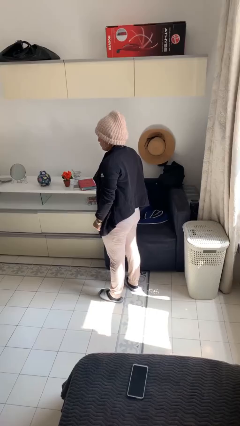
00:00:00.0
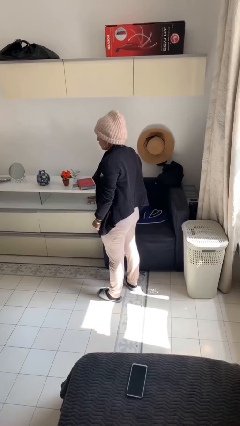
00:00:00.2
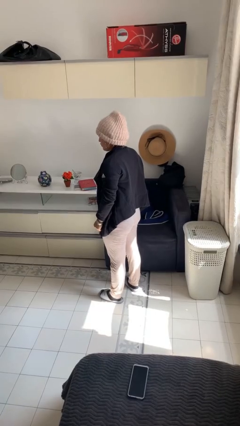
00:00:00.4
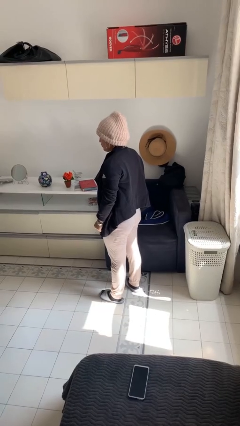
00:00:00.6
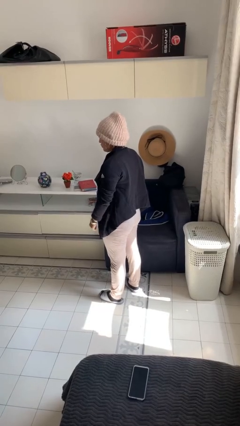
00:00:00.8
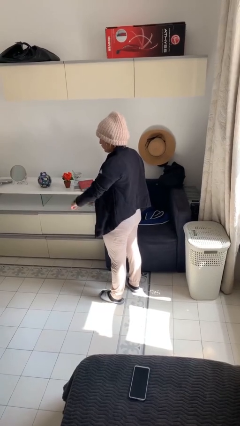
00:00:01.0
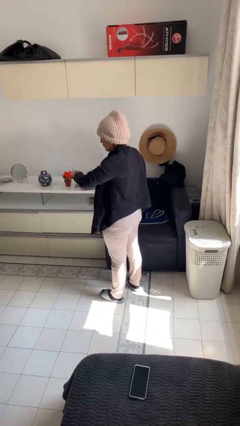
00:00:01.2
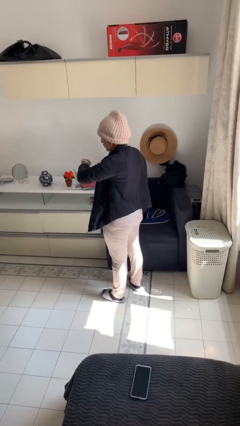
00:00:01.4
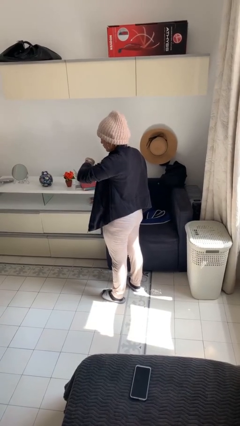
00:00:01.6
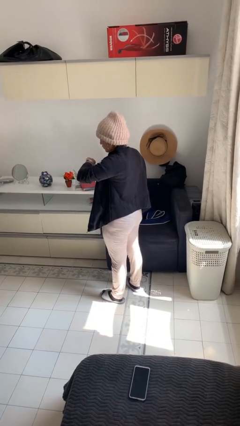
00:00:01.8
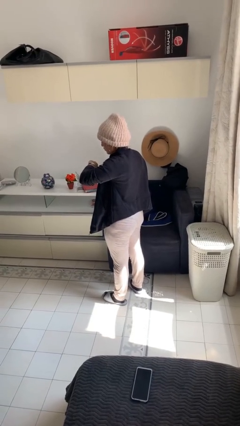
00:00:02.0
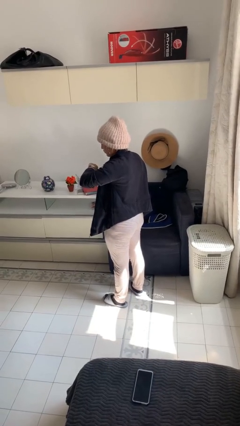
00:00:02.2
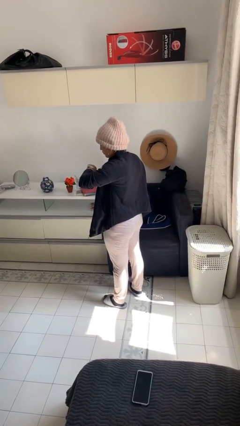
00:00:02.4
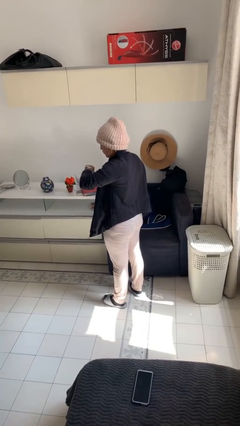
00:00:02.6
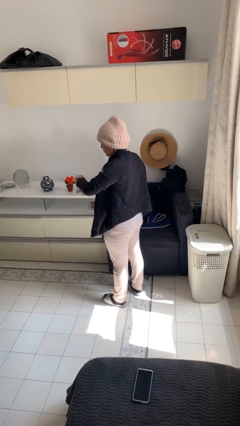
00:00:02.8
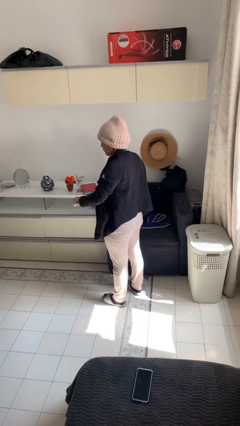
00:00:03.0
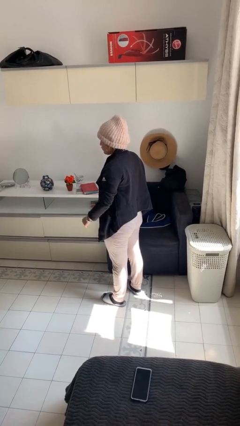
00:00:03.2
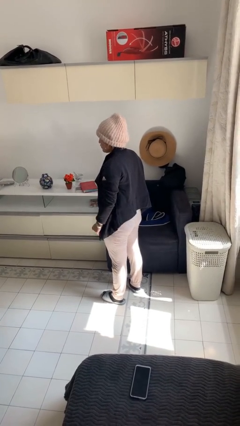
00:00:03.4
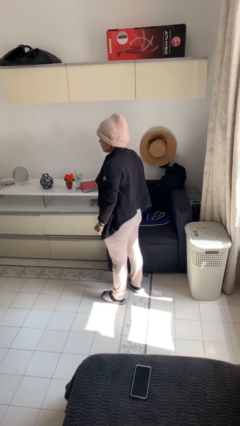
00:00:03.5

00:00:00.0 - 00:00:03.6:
person looks at wristwatch

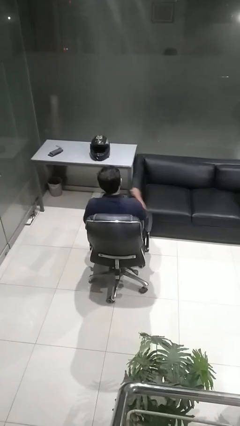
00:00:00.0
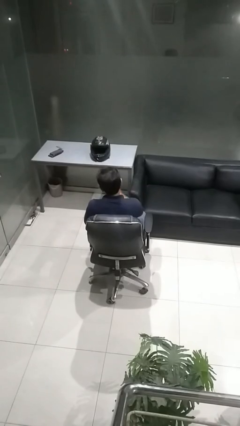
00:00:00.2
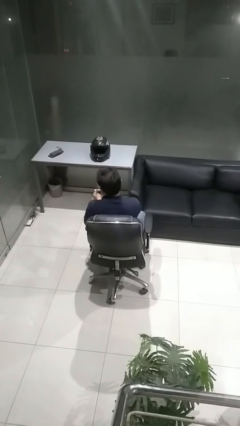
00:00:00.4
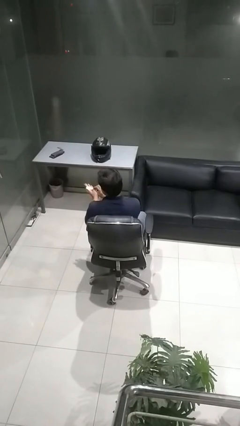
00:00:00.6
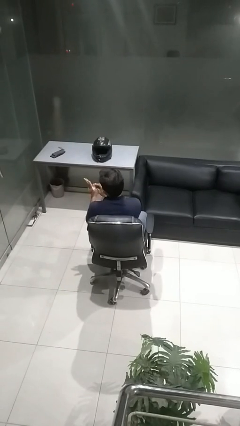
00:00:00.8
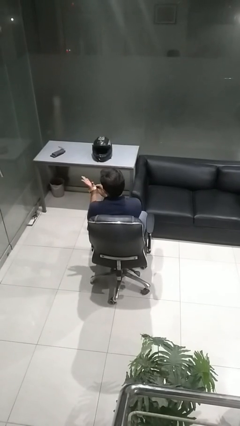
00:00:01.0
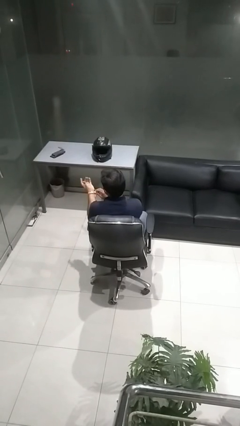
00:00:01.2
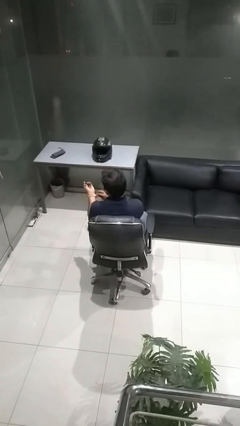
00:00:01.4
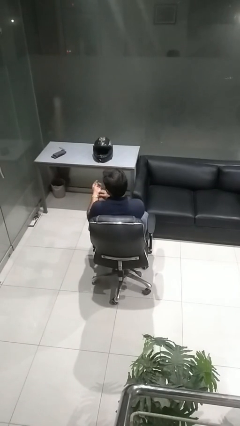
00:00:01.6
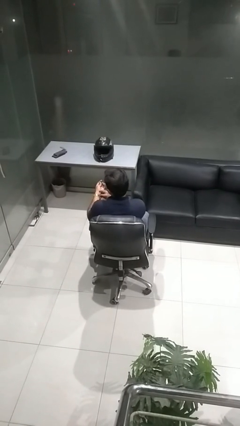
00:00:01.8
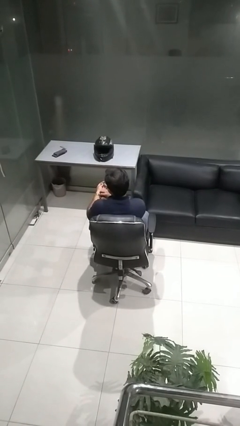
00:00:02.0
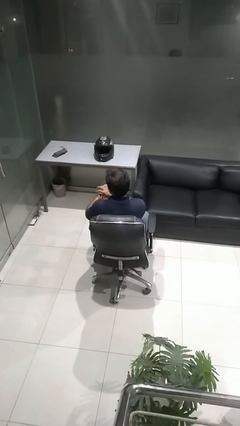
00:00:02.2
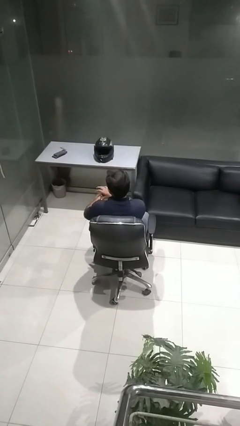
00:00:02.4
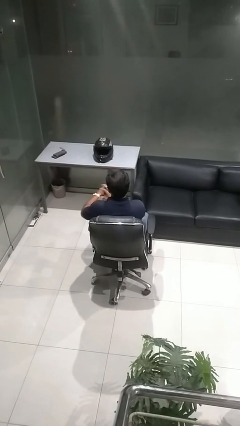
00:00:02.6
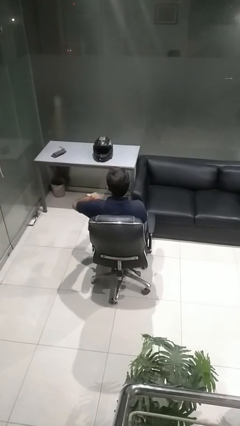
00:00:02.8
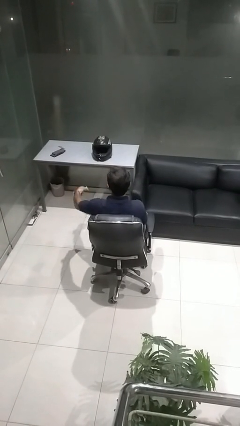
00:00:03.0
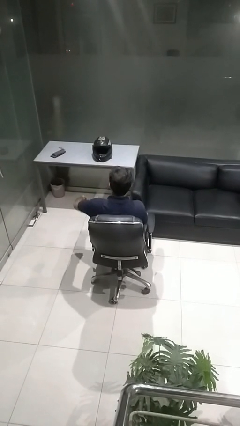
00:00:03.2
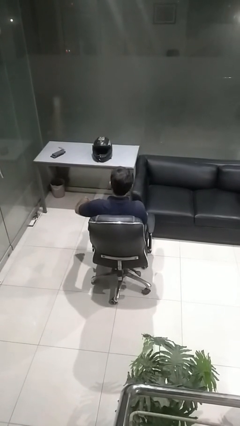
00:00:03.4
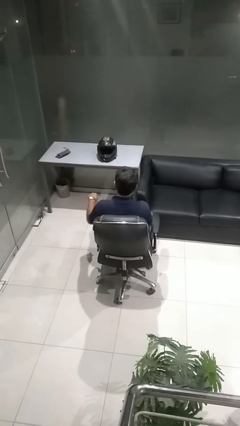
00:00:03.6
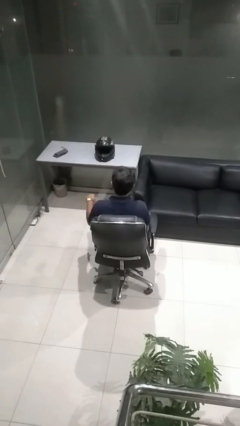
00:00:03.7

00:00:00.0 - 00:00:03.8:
person puts on wristwatch

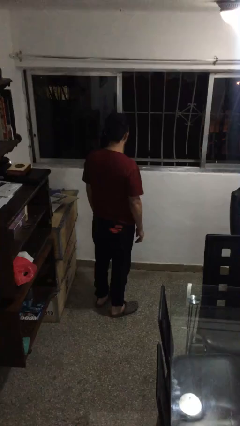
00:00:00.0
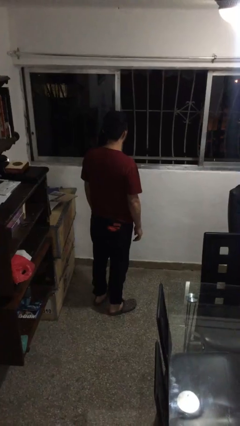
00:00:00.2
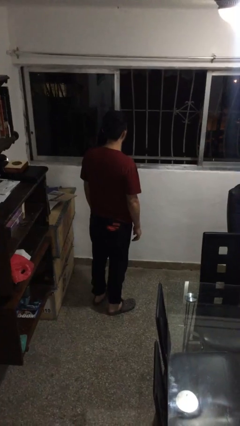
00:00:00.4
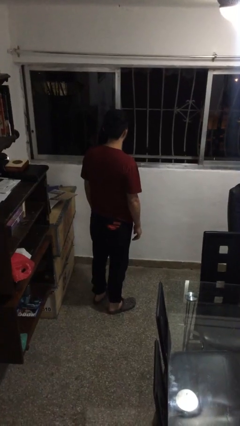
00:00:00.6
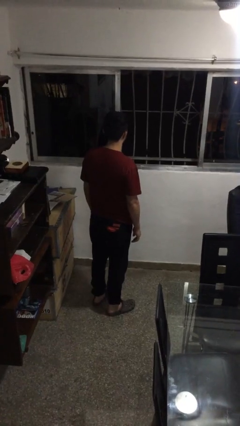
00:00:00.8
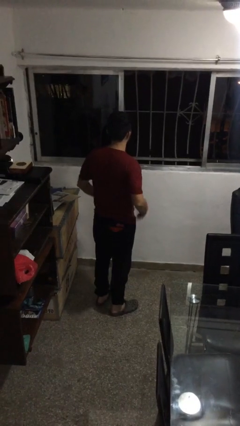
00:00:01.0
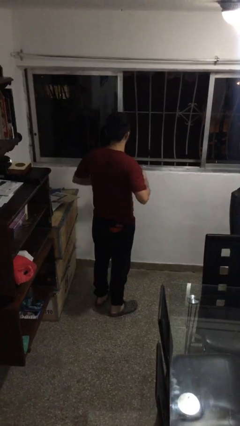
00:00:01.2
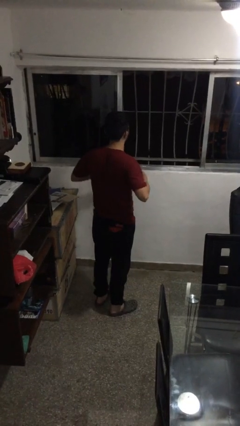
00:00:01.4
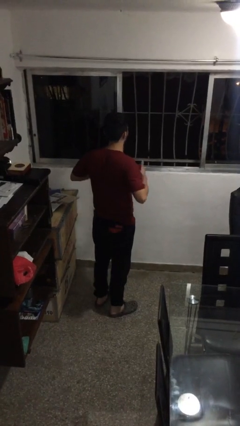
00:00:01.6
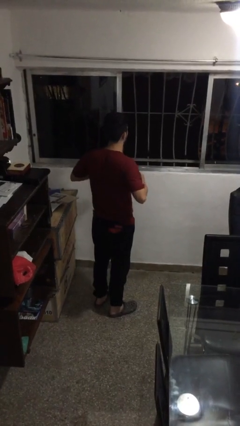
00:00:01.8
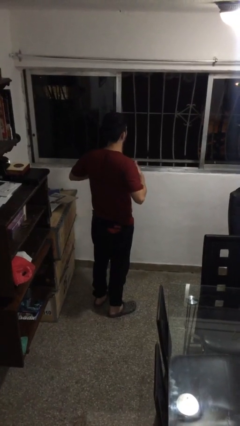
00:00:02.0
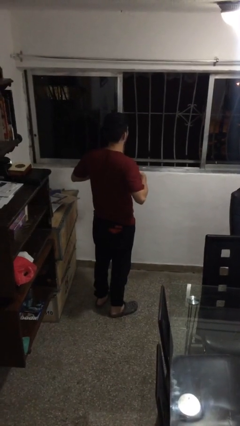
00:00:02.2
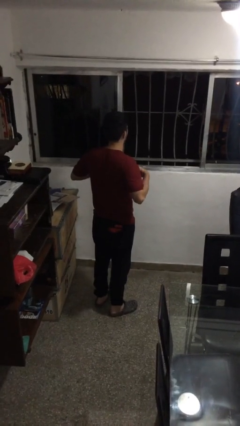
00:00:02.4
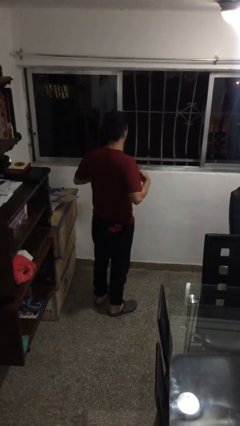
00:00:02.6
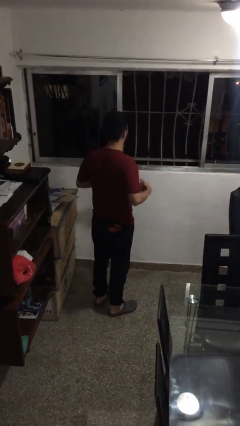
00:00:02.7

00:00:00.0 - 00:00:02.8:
person drums on chest

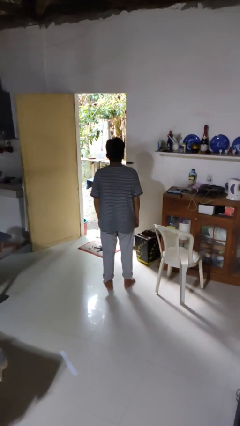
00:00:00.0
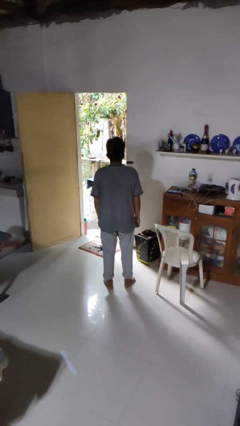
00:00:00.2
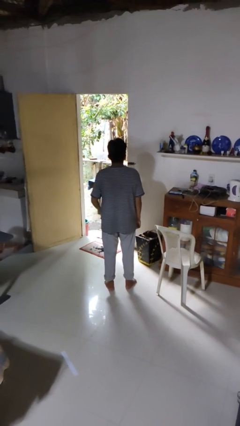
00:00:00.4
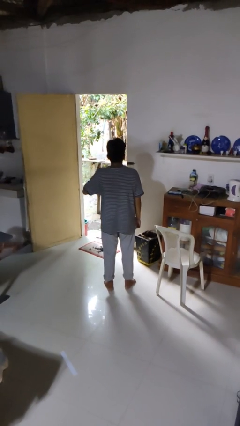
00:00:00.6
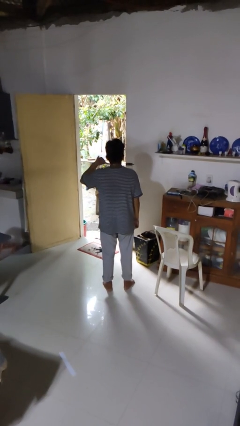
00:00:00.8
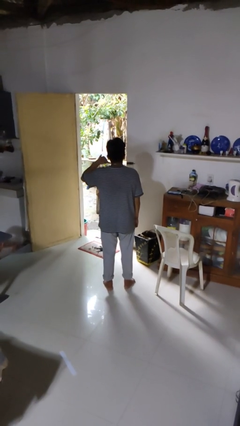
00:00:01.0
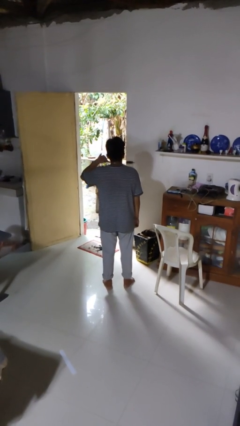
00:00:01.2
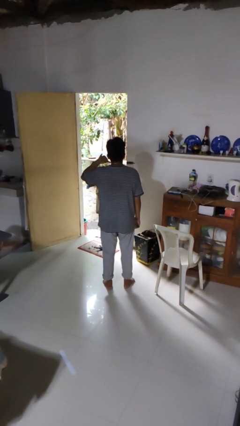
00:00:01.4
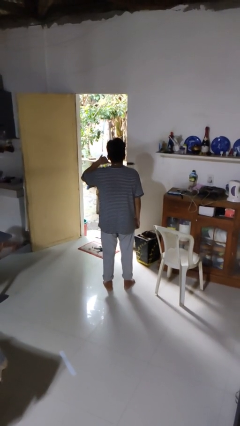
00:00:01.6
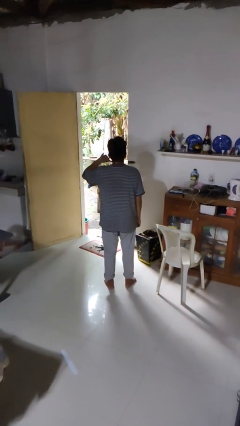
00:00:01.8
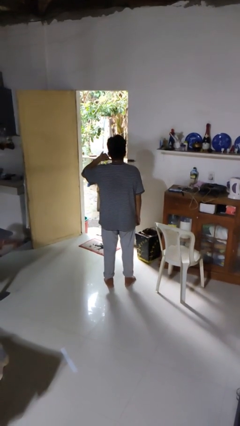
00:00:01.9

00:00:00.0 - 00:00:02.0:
person gestures call me

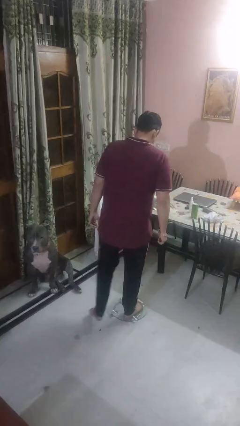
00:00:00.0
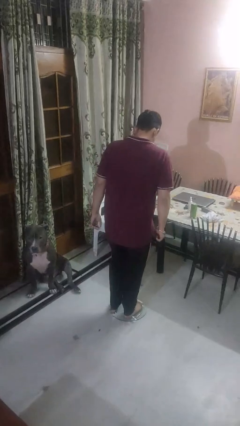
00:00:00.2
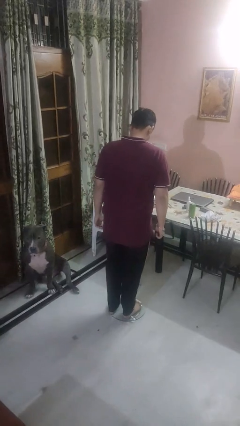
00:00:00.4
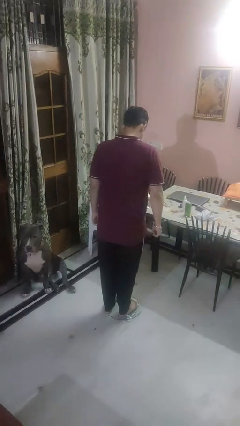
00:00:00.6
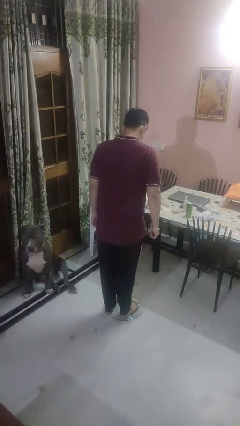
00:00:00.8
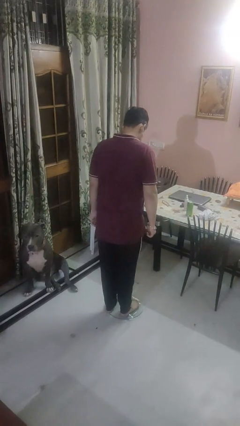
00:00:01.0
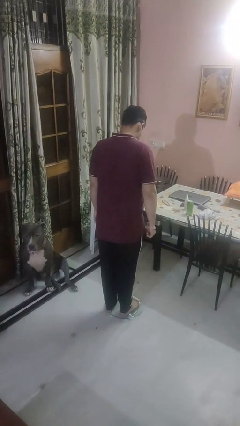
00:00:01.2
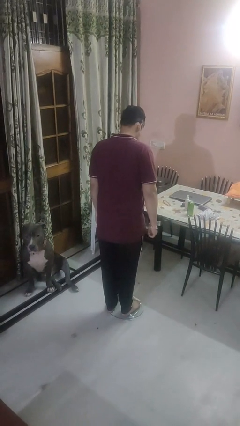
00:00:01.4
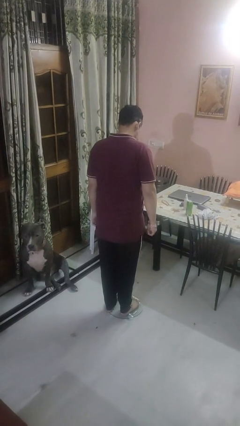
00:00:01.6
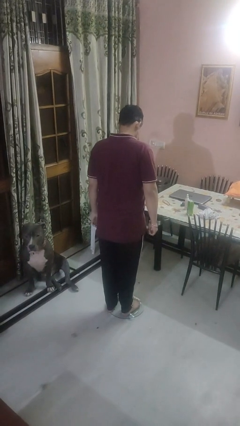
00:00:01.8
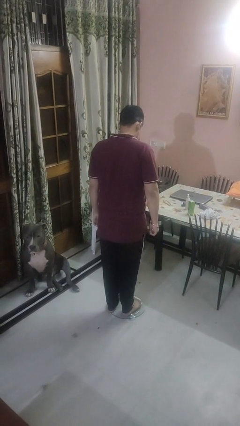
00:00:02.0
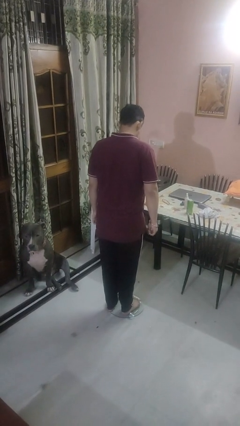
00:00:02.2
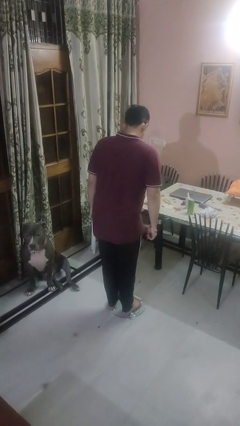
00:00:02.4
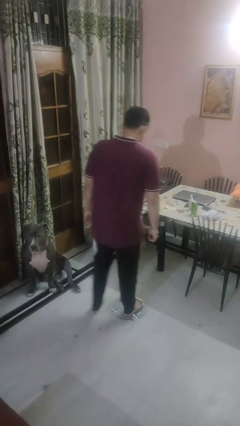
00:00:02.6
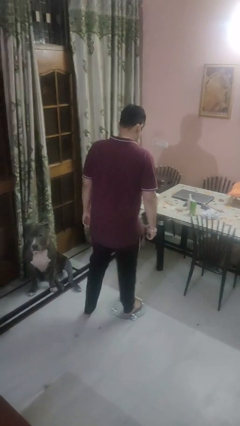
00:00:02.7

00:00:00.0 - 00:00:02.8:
person uses bodyweight scale

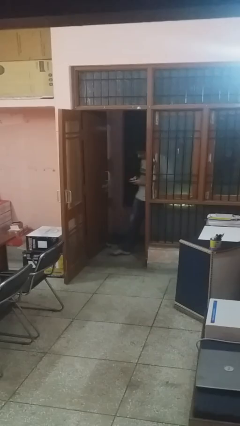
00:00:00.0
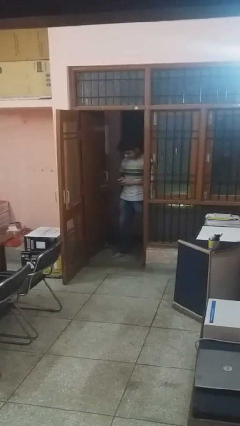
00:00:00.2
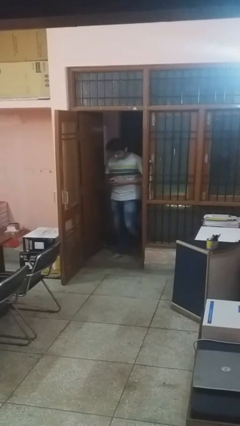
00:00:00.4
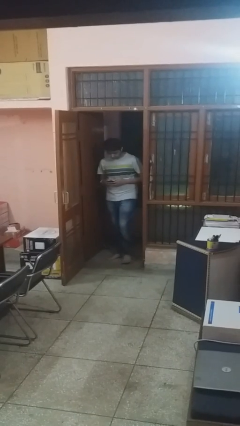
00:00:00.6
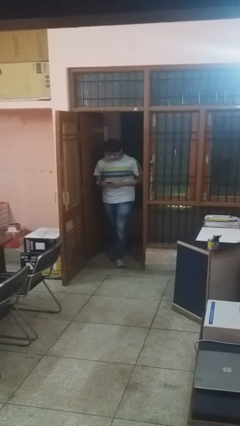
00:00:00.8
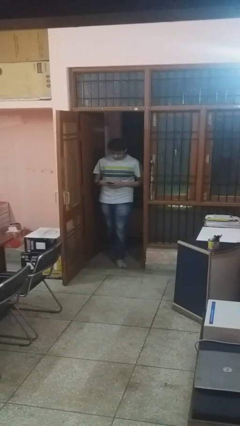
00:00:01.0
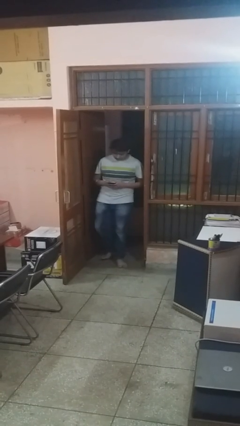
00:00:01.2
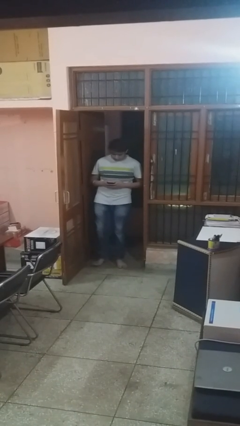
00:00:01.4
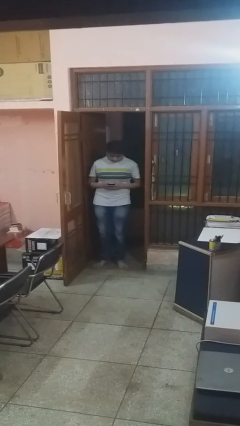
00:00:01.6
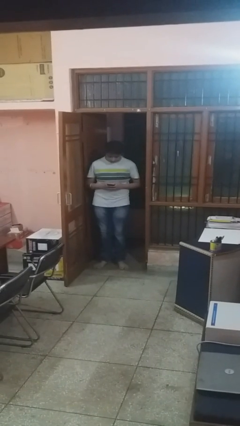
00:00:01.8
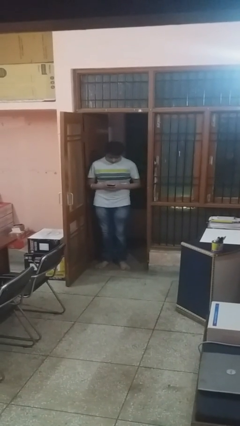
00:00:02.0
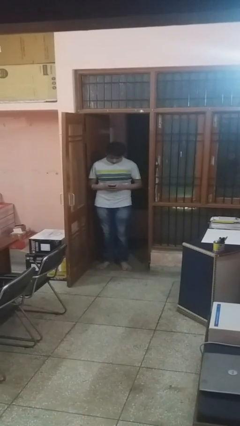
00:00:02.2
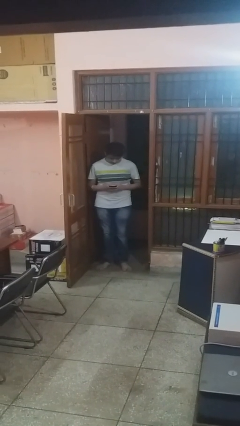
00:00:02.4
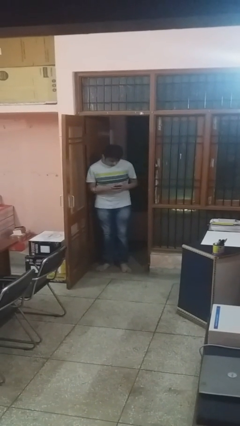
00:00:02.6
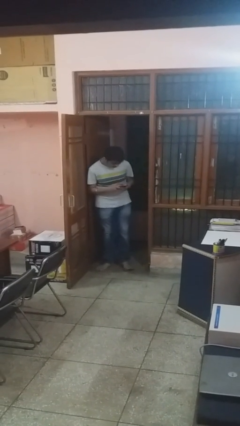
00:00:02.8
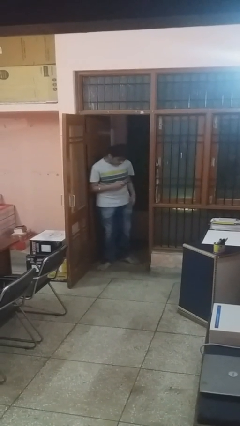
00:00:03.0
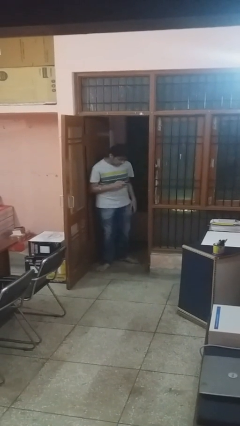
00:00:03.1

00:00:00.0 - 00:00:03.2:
person enters scene through structure
